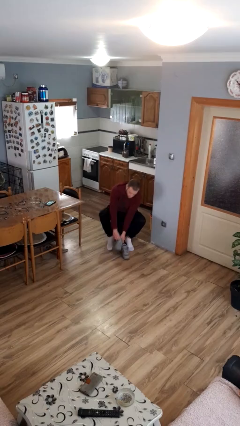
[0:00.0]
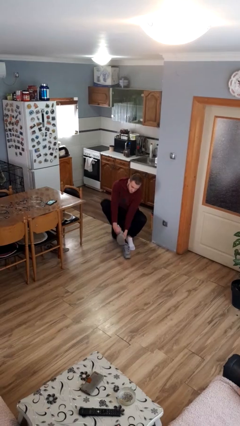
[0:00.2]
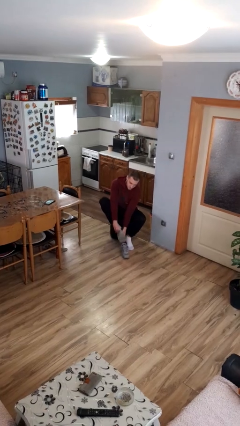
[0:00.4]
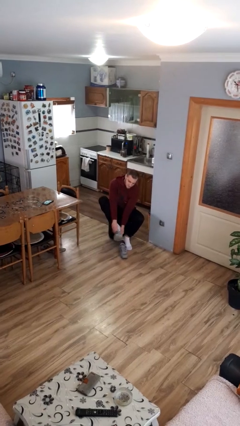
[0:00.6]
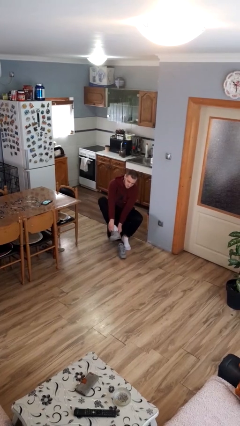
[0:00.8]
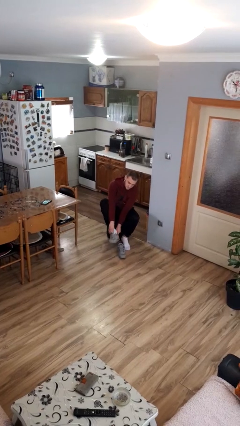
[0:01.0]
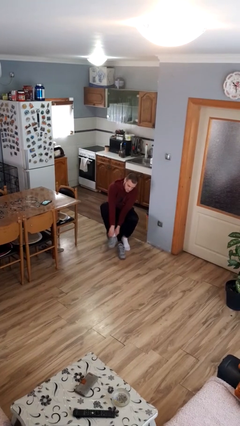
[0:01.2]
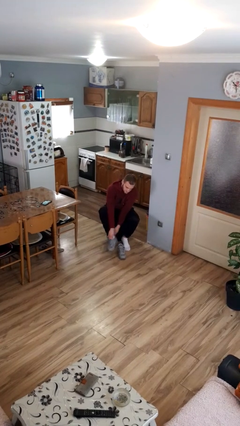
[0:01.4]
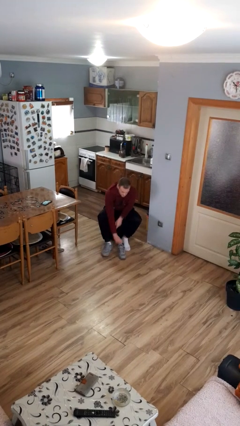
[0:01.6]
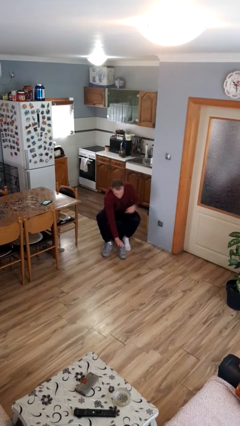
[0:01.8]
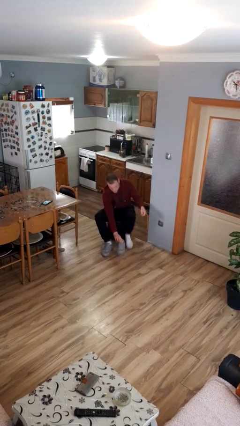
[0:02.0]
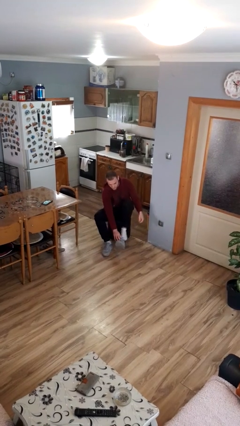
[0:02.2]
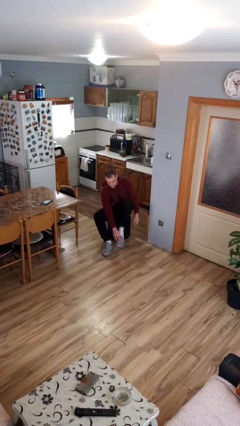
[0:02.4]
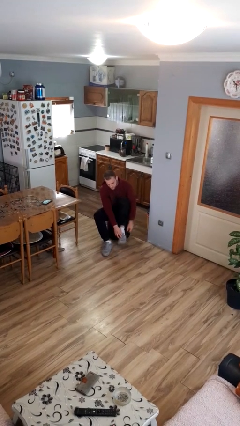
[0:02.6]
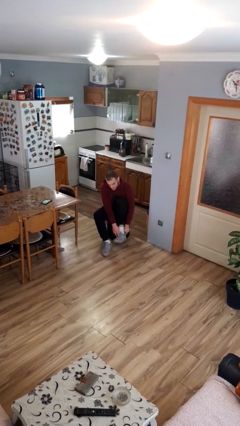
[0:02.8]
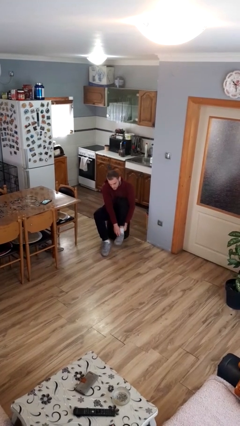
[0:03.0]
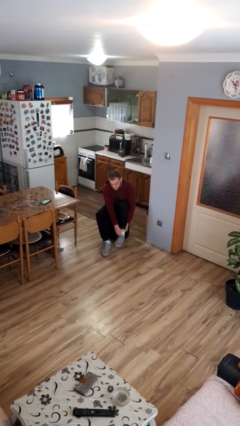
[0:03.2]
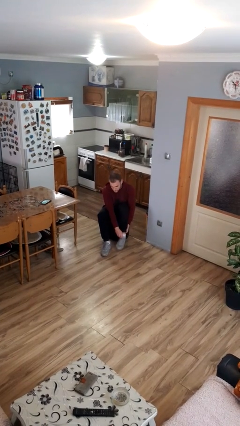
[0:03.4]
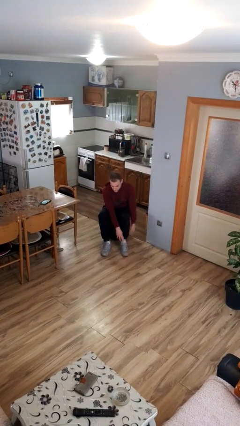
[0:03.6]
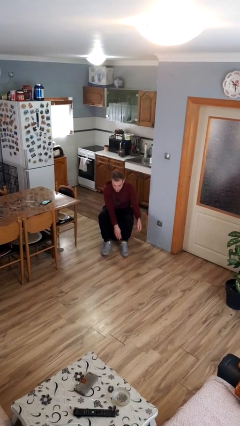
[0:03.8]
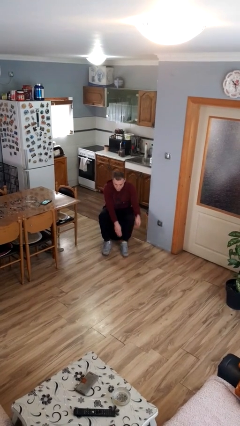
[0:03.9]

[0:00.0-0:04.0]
person puts on shoes

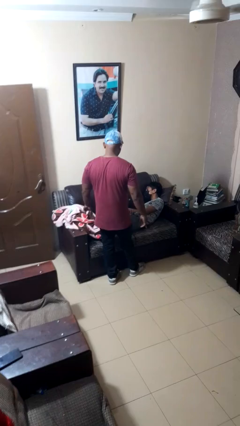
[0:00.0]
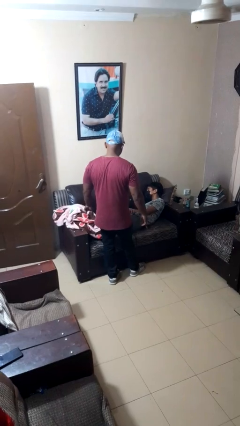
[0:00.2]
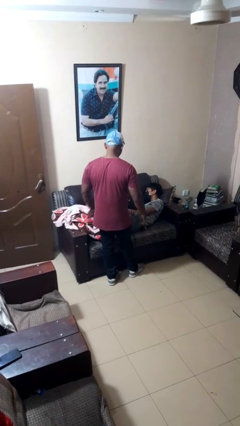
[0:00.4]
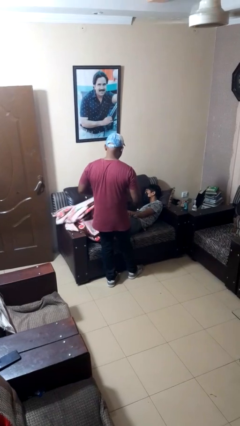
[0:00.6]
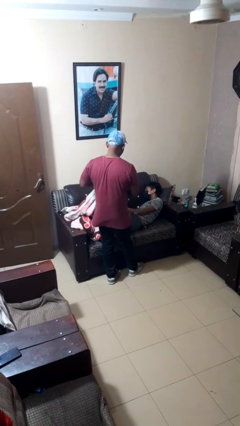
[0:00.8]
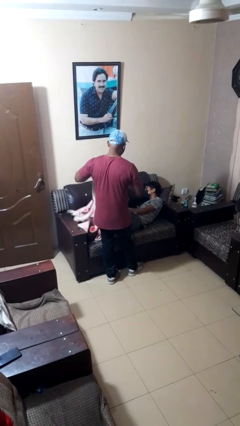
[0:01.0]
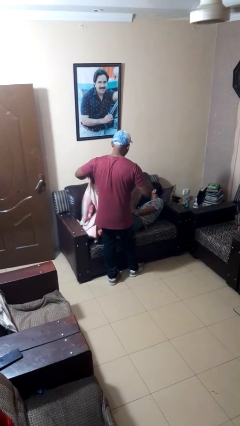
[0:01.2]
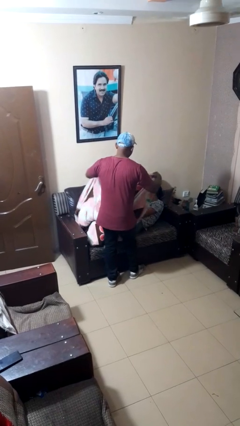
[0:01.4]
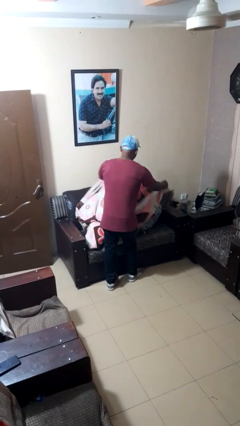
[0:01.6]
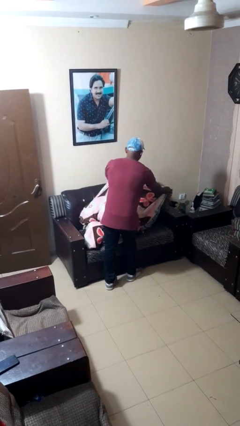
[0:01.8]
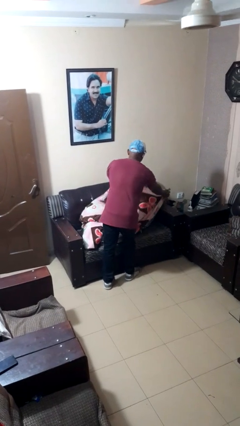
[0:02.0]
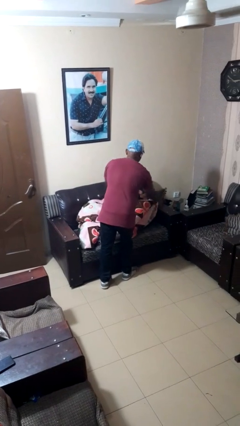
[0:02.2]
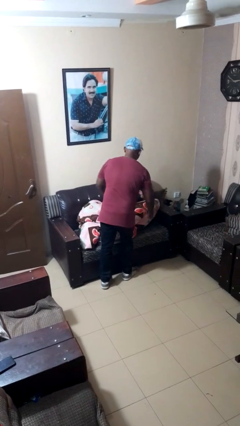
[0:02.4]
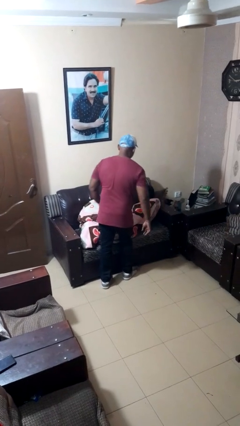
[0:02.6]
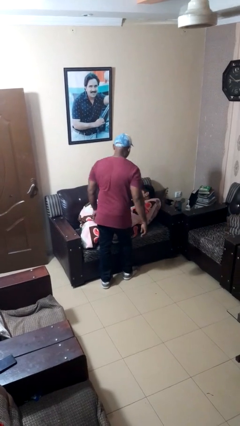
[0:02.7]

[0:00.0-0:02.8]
person covers friend with blanket

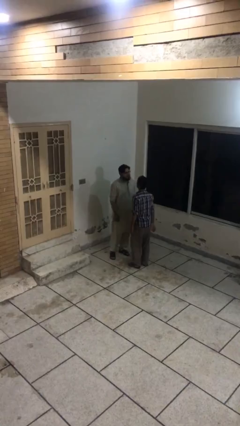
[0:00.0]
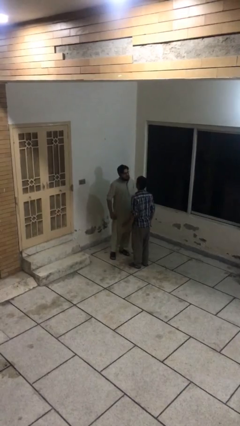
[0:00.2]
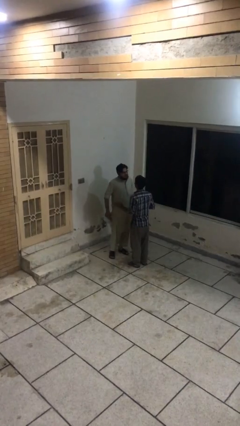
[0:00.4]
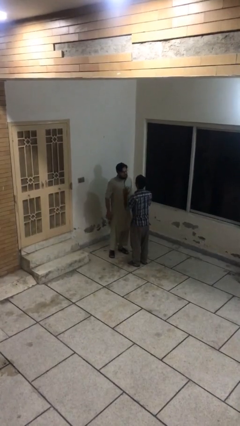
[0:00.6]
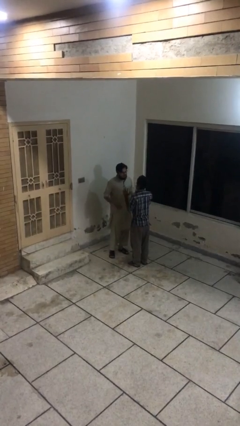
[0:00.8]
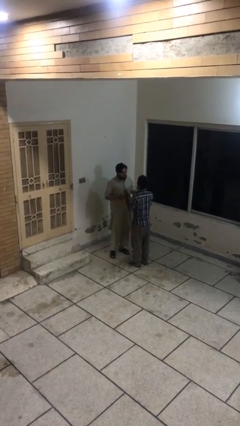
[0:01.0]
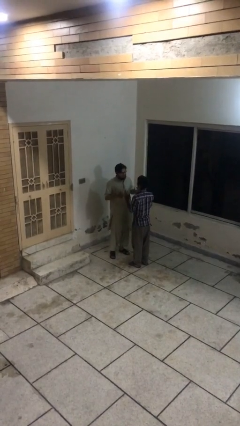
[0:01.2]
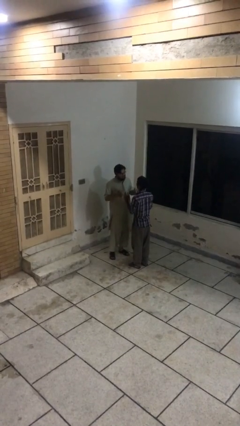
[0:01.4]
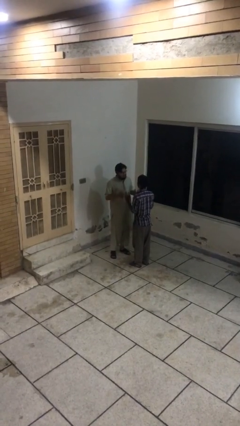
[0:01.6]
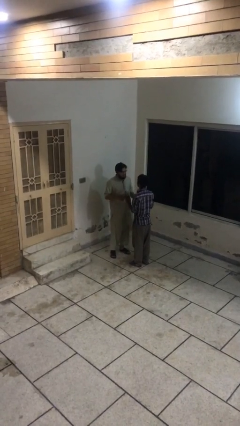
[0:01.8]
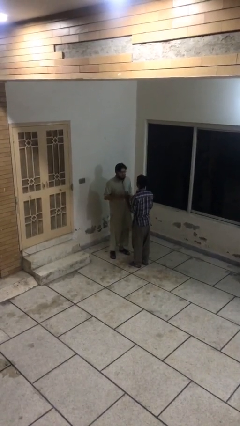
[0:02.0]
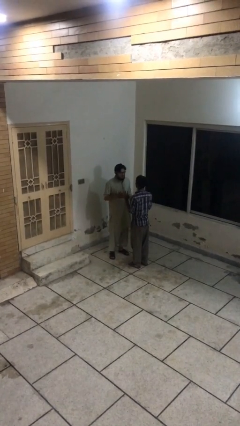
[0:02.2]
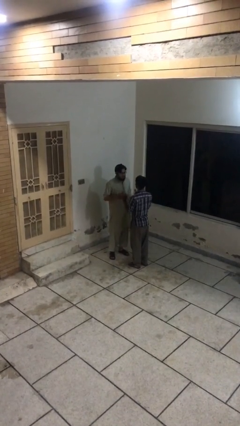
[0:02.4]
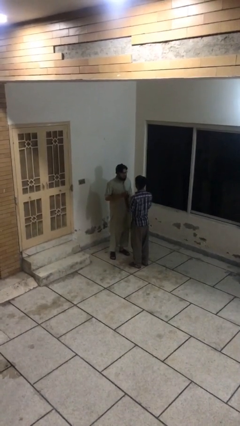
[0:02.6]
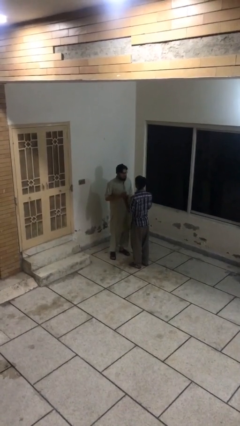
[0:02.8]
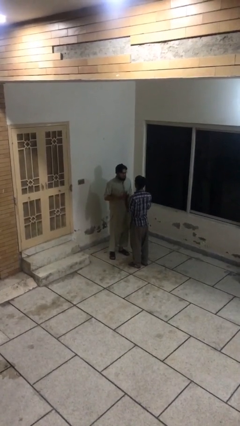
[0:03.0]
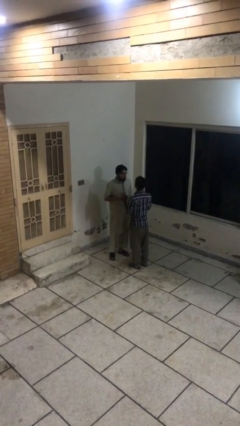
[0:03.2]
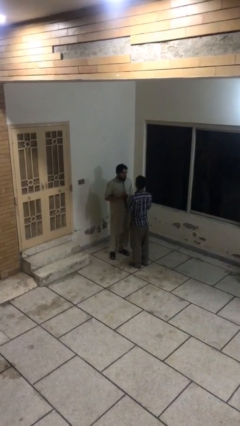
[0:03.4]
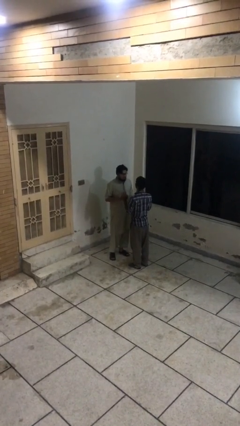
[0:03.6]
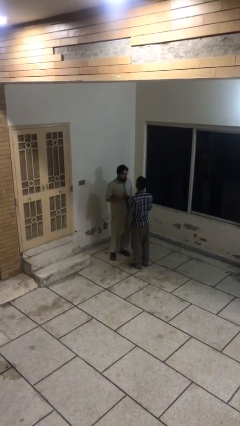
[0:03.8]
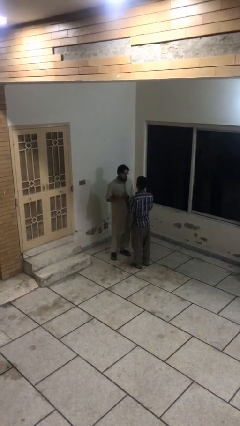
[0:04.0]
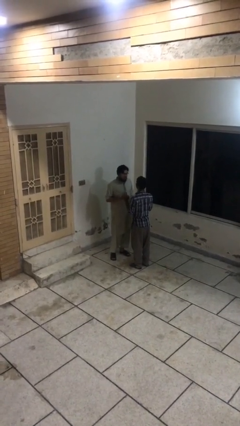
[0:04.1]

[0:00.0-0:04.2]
person talks to person

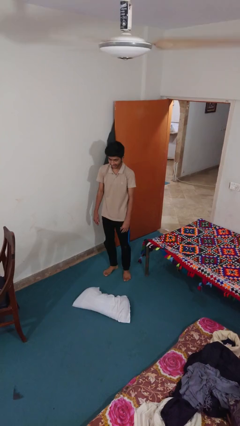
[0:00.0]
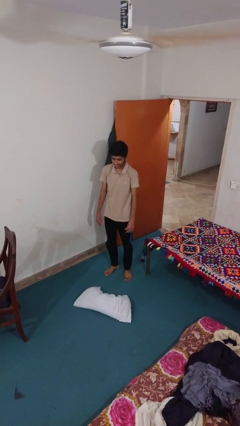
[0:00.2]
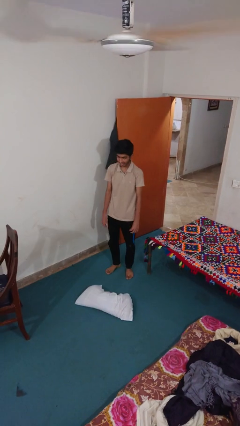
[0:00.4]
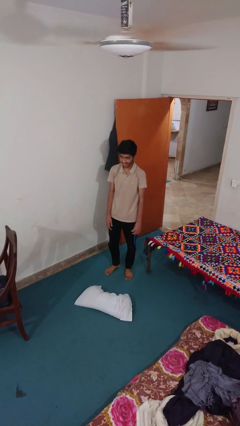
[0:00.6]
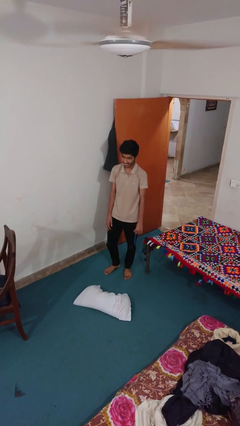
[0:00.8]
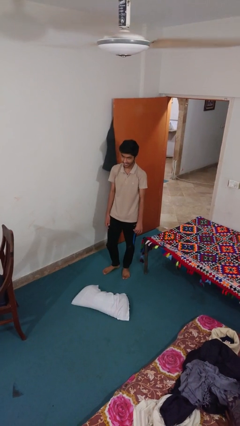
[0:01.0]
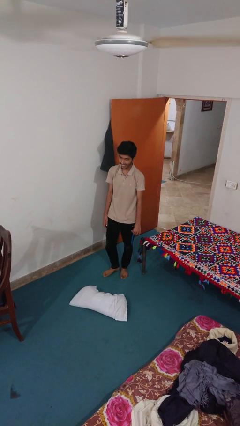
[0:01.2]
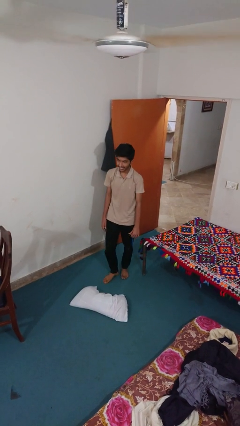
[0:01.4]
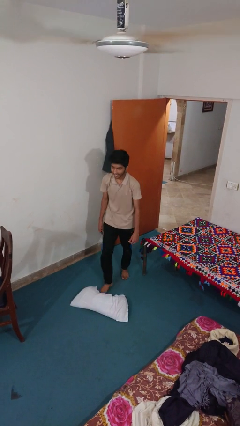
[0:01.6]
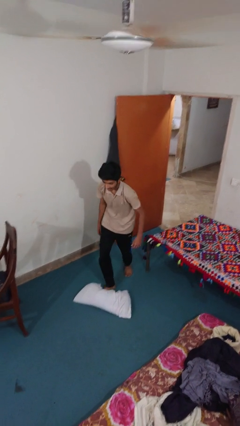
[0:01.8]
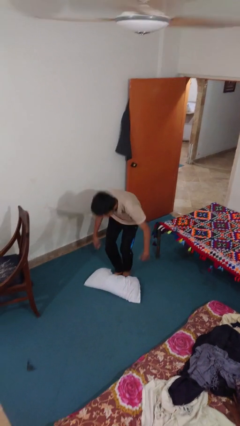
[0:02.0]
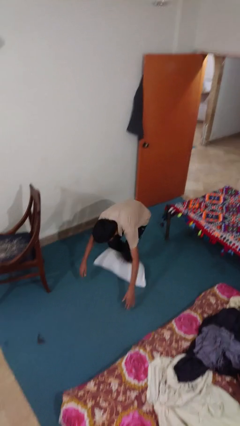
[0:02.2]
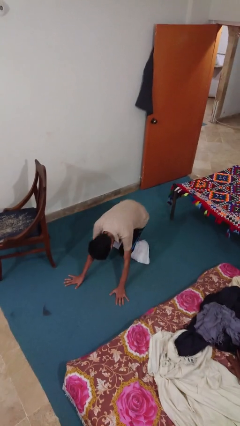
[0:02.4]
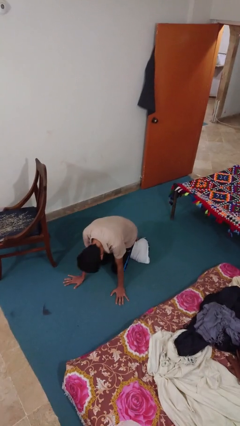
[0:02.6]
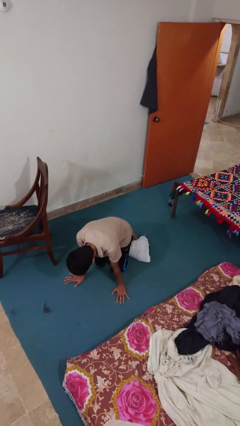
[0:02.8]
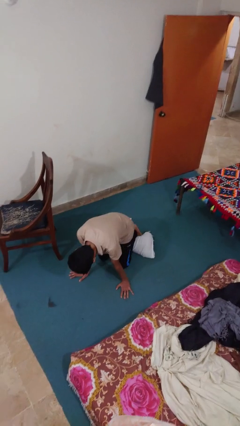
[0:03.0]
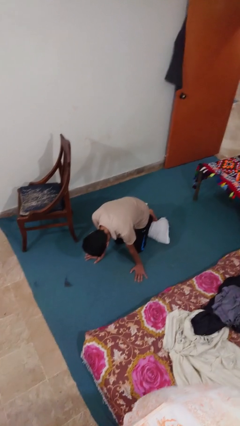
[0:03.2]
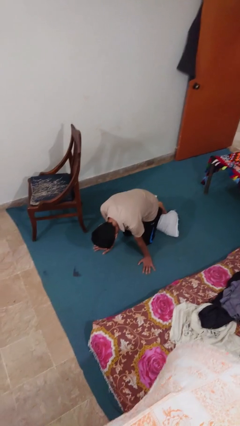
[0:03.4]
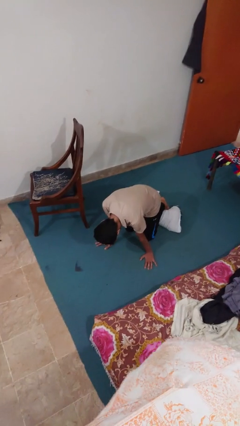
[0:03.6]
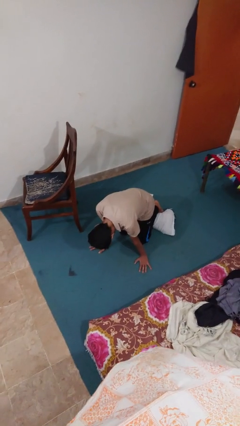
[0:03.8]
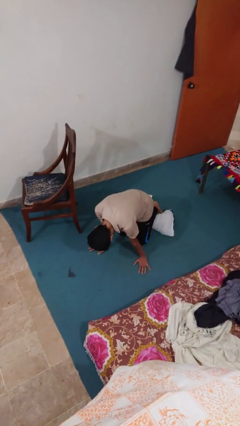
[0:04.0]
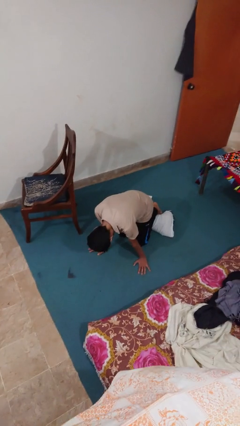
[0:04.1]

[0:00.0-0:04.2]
person trips on object on floor

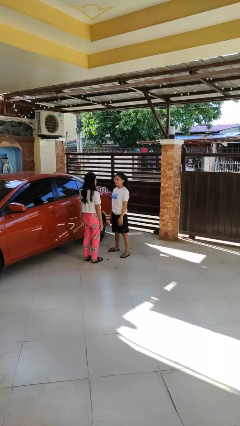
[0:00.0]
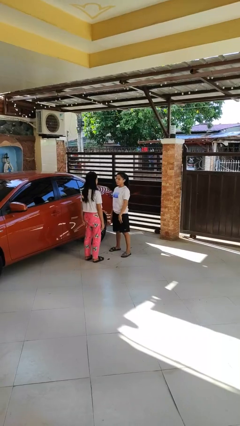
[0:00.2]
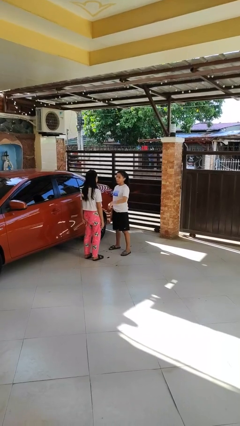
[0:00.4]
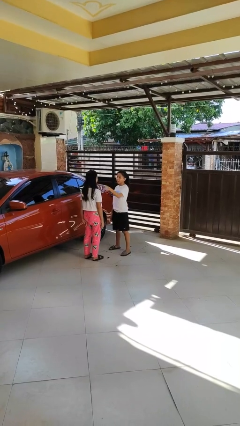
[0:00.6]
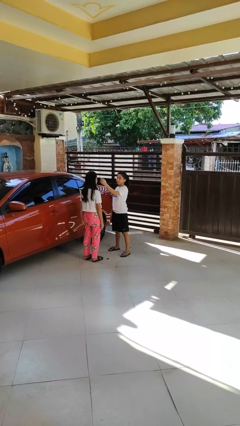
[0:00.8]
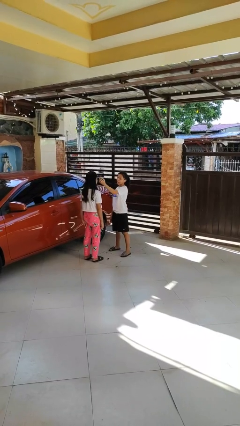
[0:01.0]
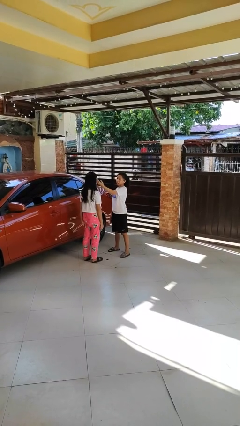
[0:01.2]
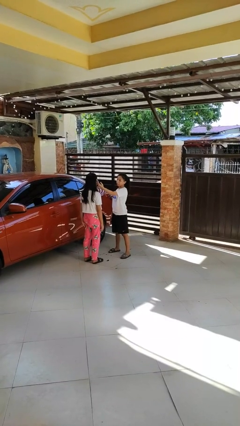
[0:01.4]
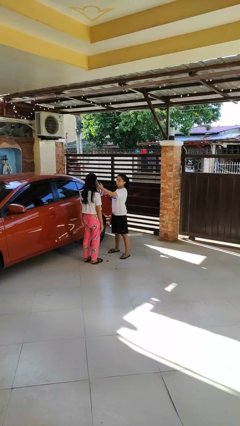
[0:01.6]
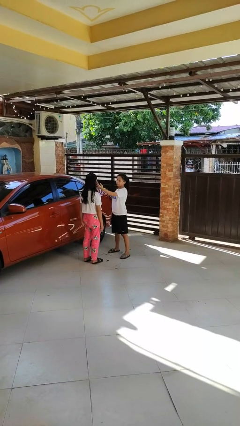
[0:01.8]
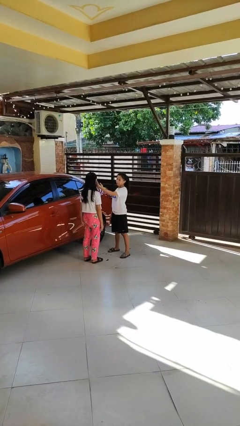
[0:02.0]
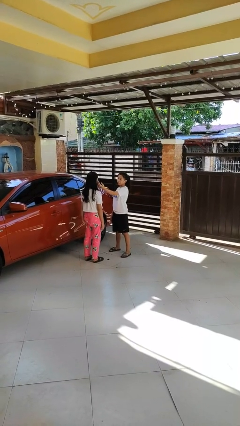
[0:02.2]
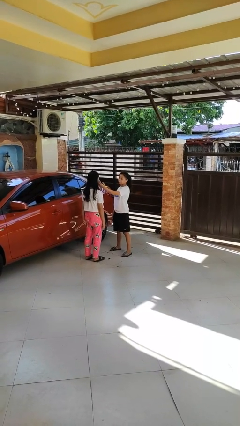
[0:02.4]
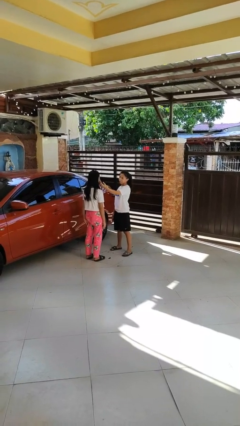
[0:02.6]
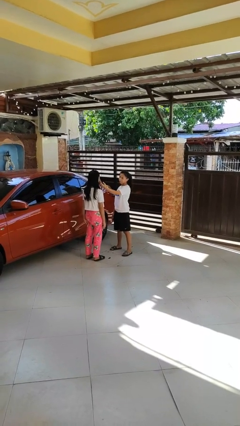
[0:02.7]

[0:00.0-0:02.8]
person touches face of person
